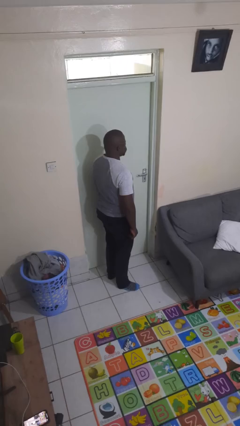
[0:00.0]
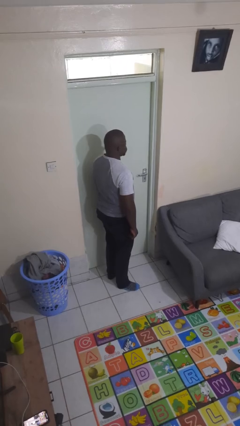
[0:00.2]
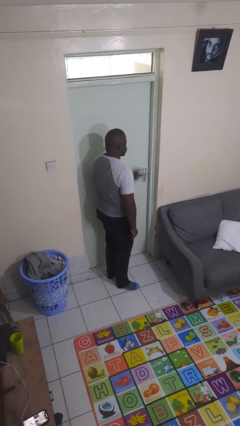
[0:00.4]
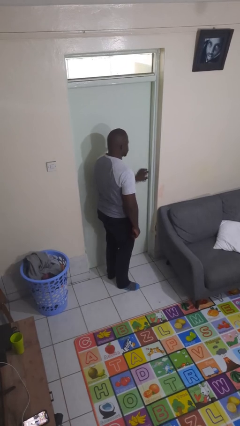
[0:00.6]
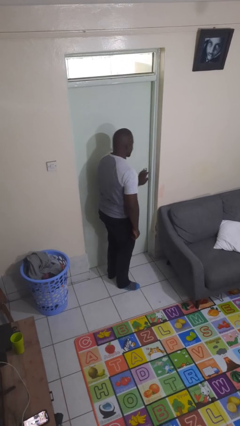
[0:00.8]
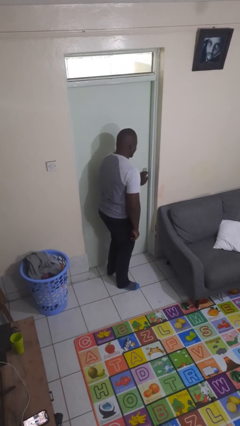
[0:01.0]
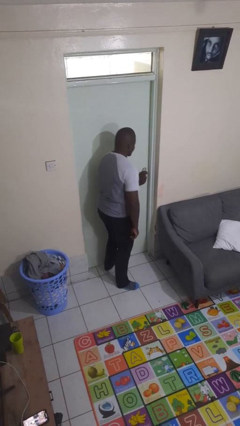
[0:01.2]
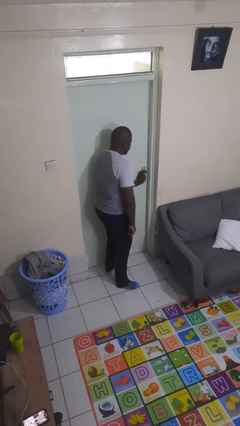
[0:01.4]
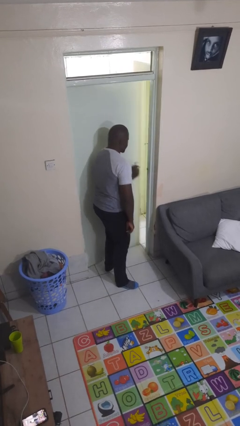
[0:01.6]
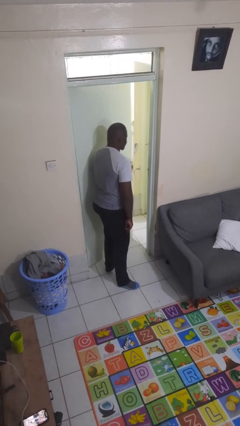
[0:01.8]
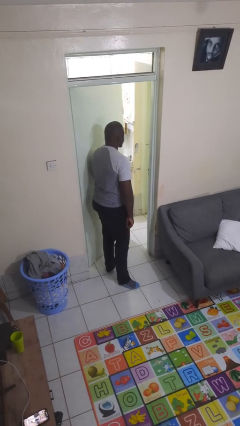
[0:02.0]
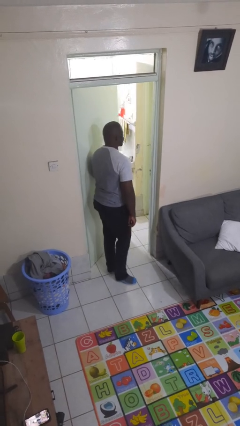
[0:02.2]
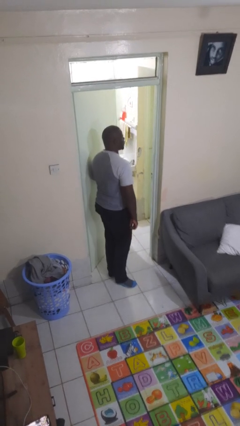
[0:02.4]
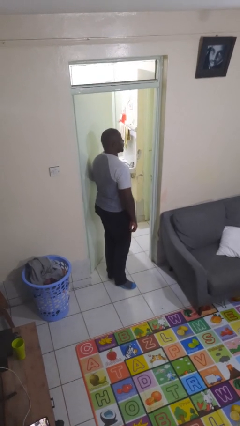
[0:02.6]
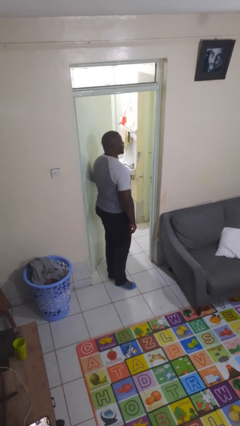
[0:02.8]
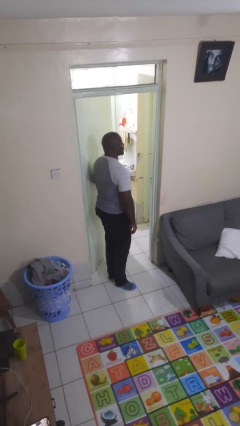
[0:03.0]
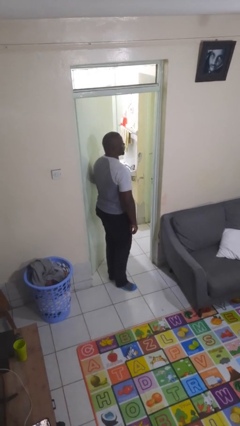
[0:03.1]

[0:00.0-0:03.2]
person opens facility door

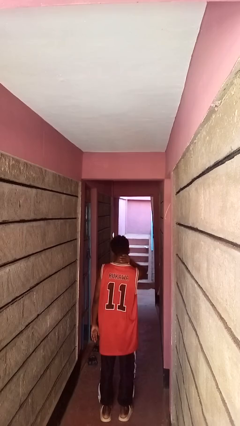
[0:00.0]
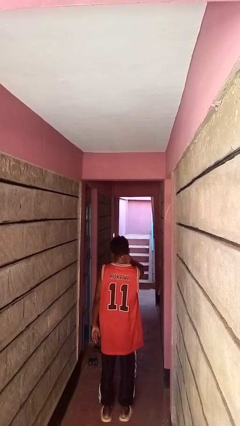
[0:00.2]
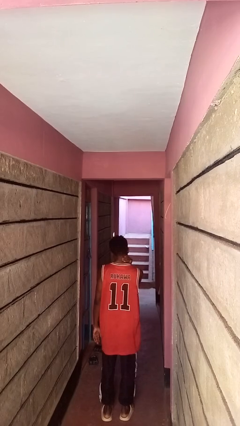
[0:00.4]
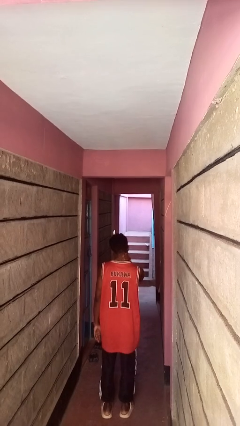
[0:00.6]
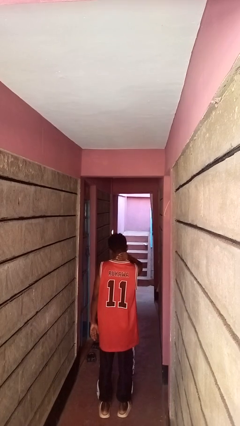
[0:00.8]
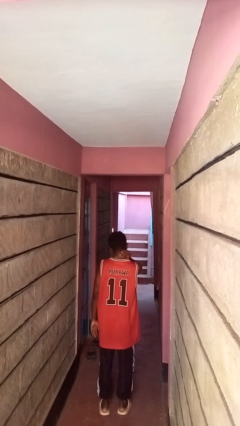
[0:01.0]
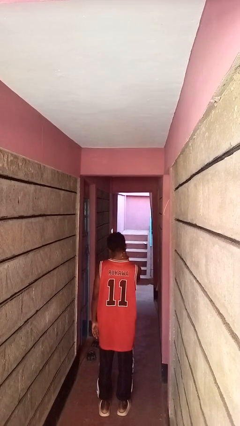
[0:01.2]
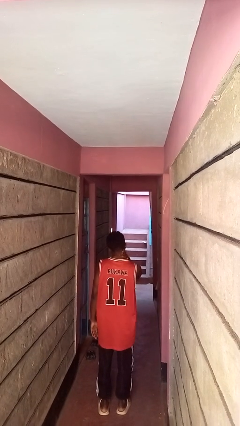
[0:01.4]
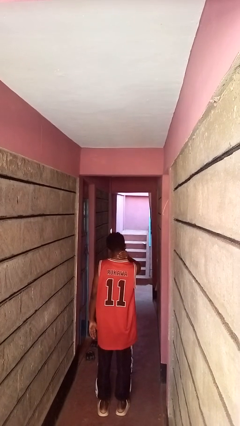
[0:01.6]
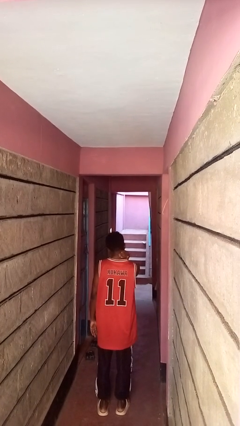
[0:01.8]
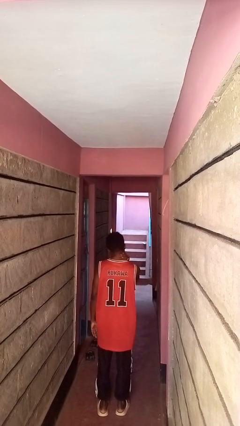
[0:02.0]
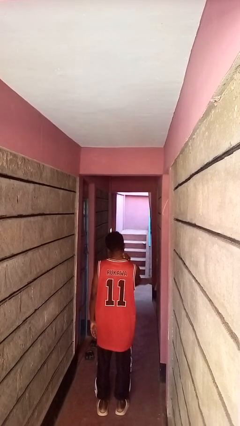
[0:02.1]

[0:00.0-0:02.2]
person rubs neck

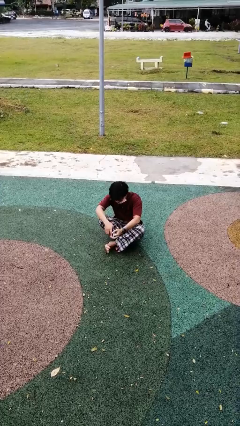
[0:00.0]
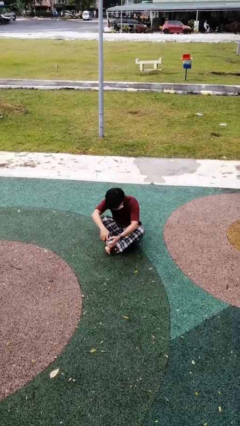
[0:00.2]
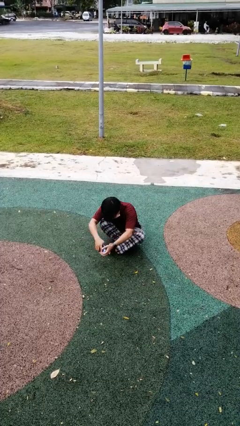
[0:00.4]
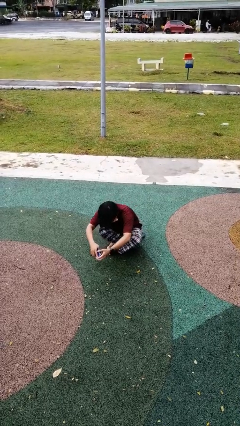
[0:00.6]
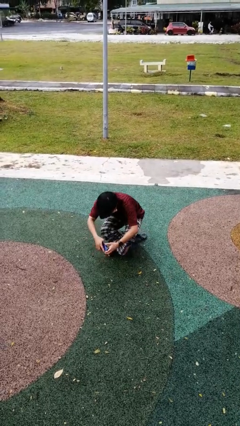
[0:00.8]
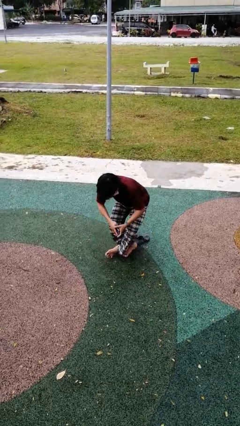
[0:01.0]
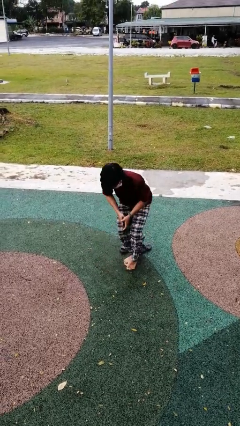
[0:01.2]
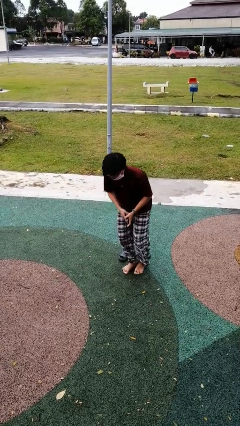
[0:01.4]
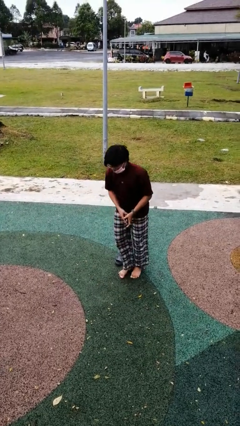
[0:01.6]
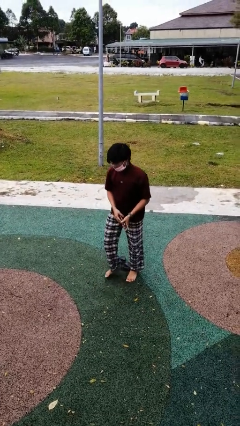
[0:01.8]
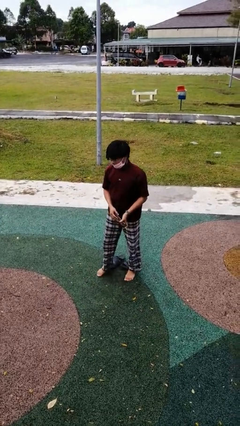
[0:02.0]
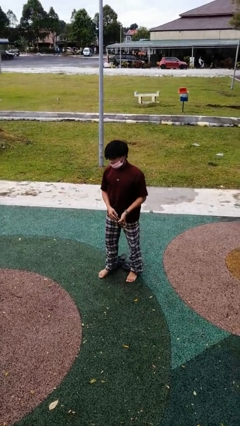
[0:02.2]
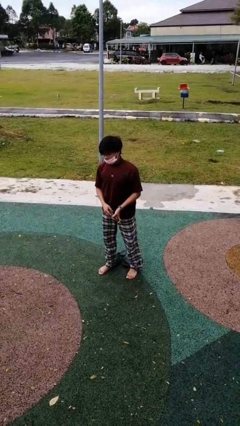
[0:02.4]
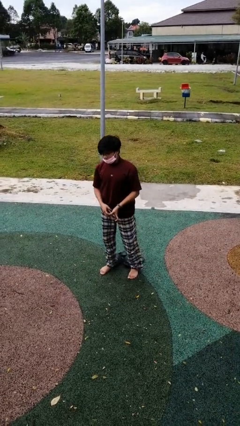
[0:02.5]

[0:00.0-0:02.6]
person stands up from floor

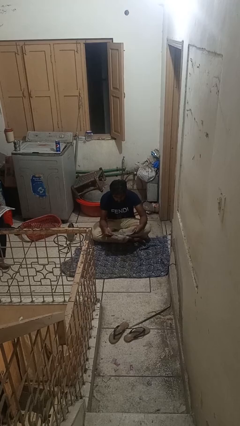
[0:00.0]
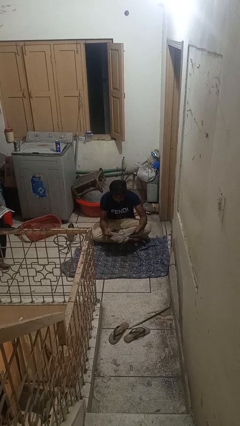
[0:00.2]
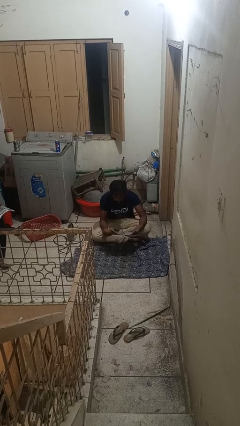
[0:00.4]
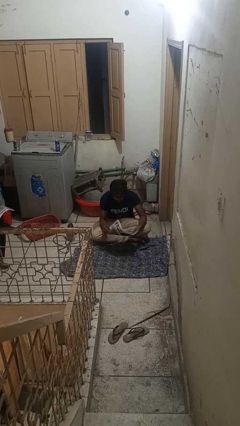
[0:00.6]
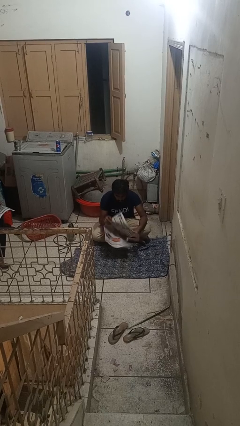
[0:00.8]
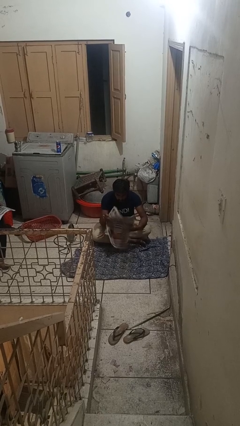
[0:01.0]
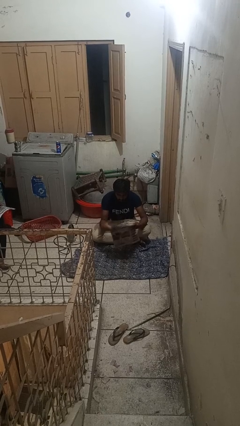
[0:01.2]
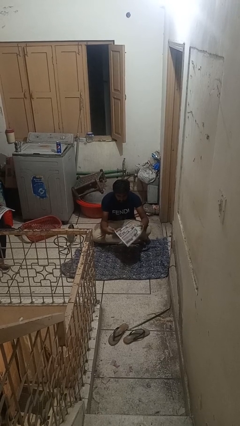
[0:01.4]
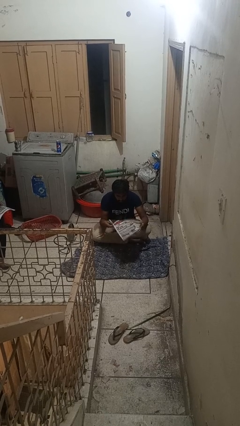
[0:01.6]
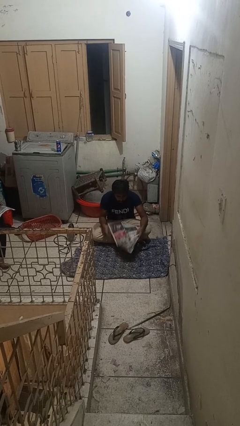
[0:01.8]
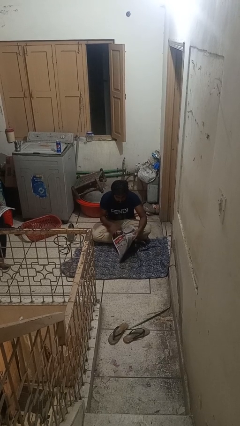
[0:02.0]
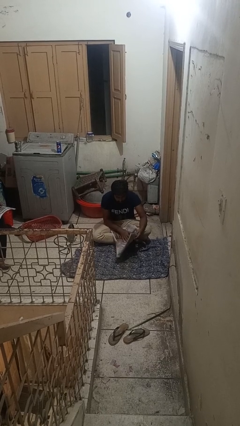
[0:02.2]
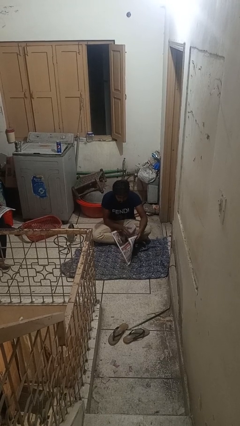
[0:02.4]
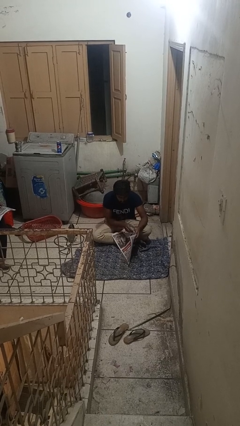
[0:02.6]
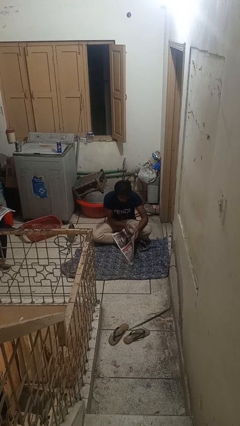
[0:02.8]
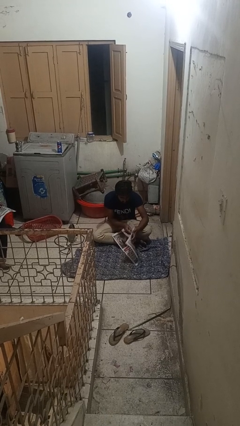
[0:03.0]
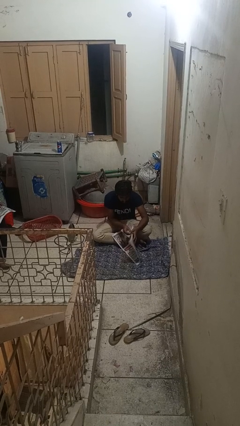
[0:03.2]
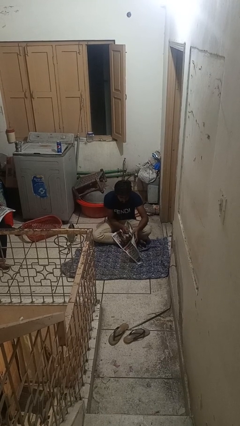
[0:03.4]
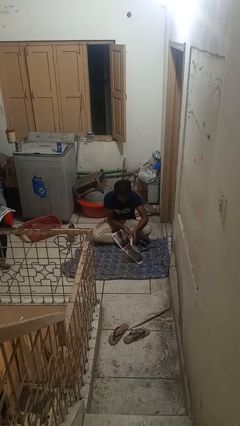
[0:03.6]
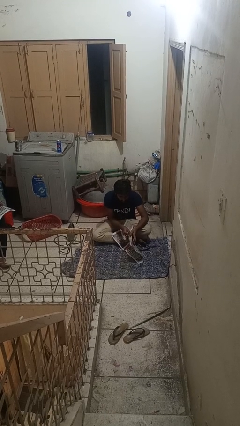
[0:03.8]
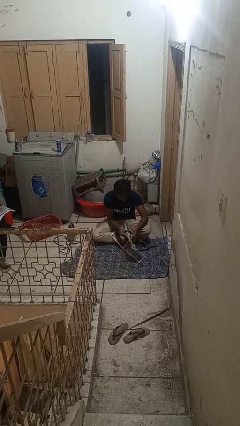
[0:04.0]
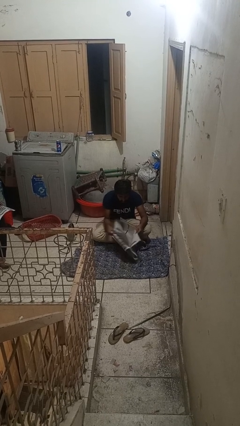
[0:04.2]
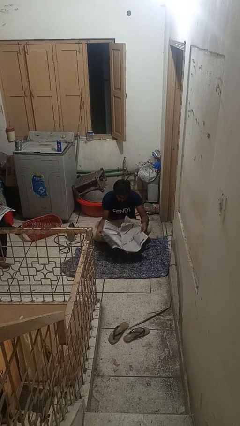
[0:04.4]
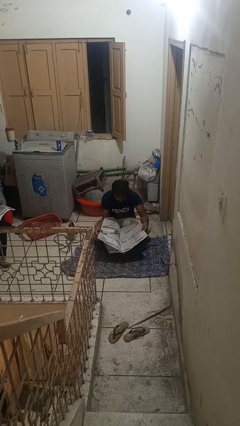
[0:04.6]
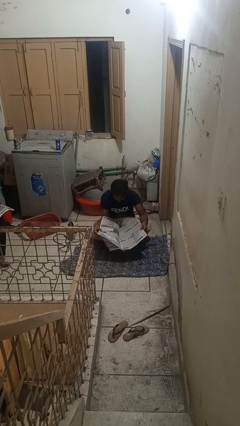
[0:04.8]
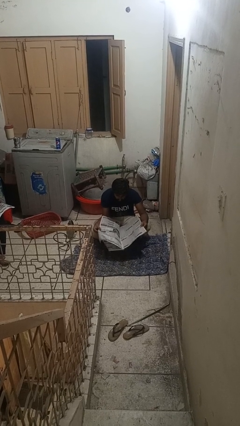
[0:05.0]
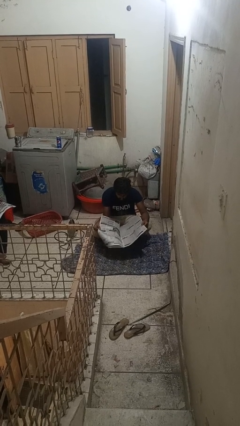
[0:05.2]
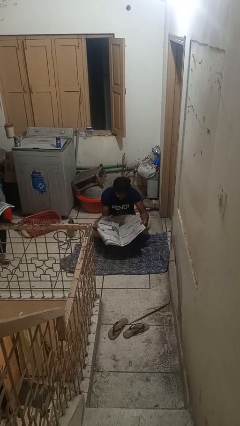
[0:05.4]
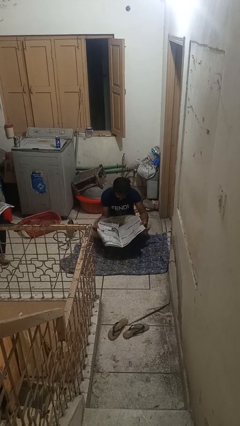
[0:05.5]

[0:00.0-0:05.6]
person reads newspaper

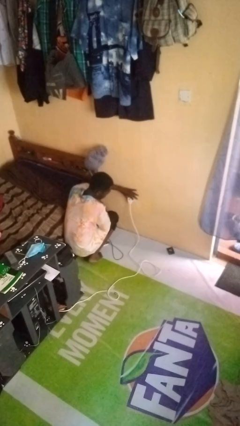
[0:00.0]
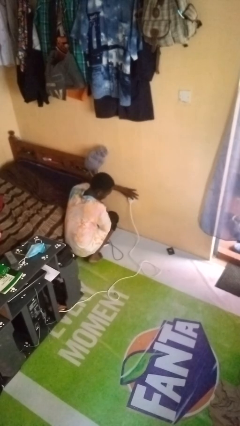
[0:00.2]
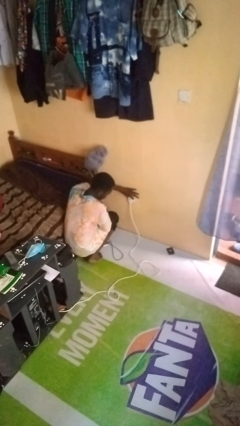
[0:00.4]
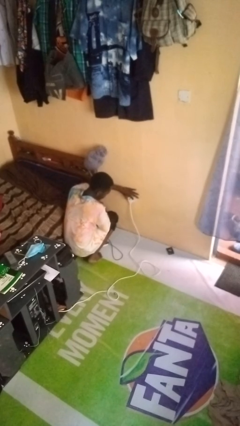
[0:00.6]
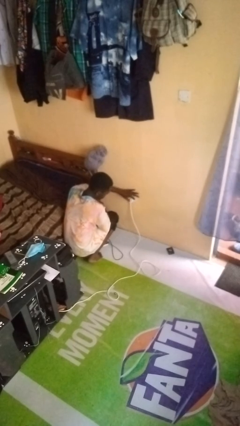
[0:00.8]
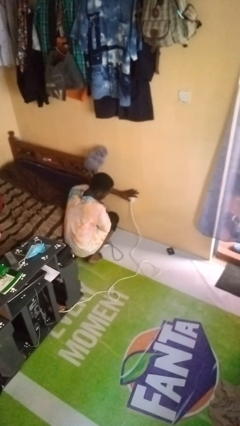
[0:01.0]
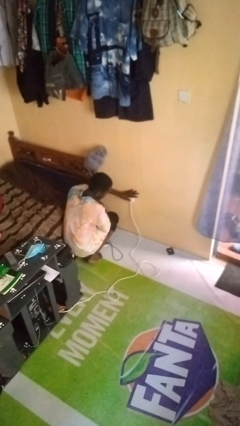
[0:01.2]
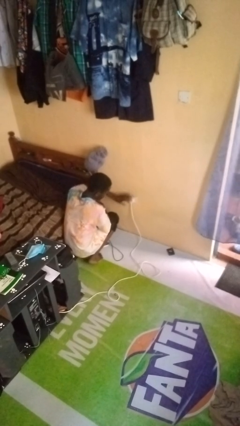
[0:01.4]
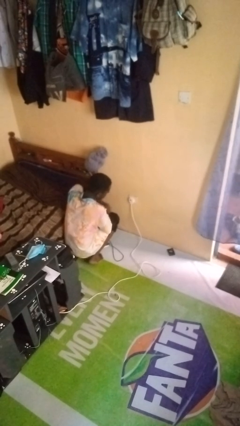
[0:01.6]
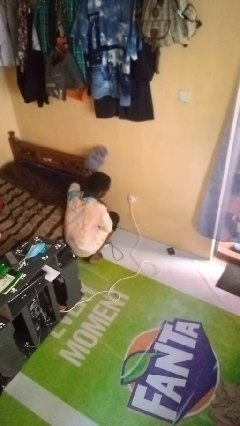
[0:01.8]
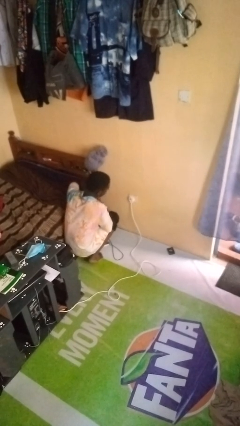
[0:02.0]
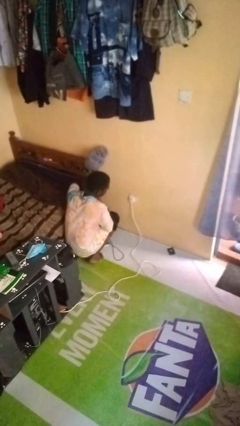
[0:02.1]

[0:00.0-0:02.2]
person plugs into electrical socket

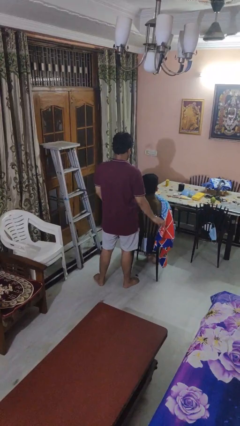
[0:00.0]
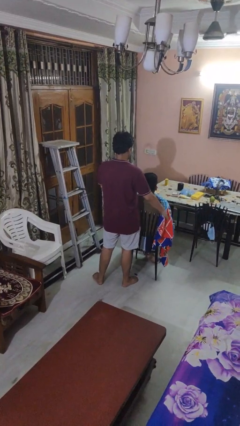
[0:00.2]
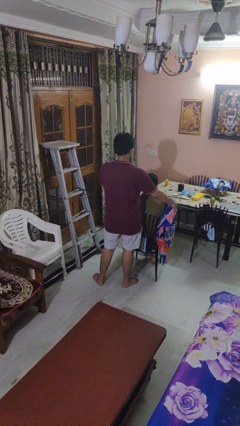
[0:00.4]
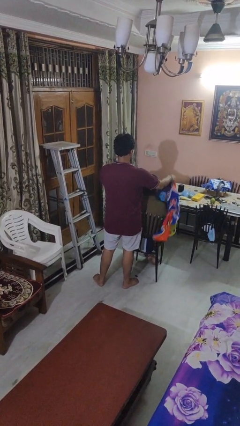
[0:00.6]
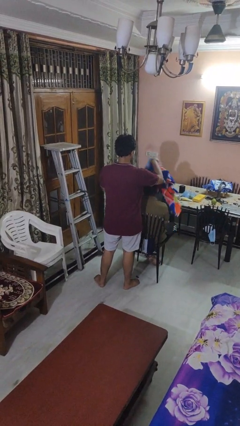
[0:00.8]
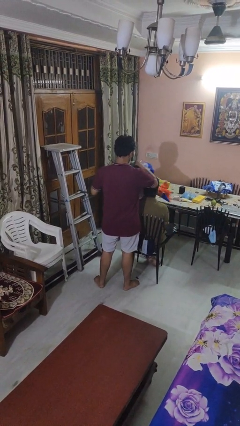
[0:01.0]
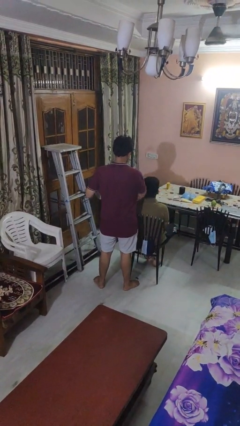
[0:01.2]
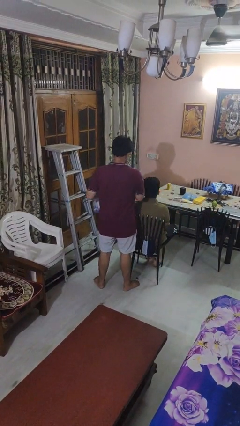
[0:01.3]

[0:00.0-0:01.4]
person uncovers friend with blanket
